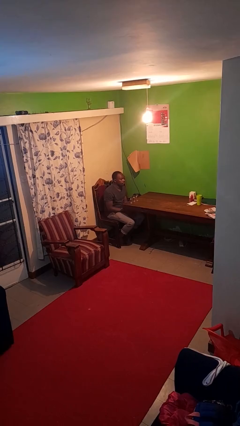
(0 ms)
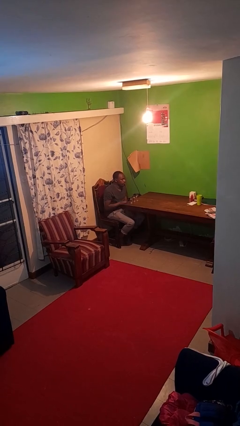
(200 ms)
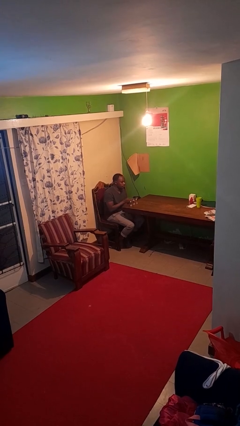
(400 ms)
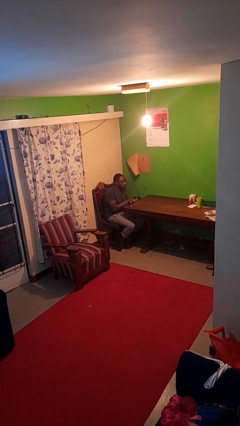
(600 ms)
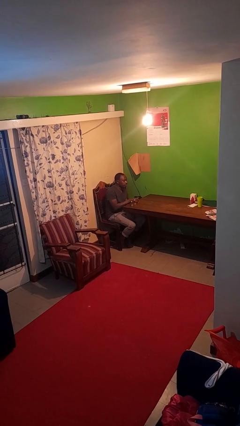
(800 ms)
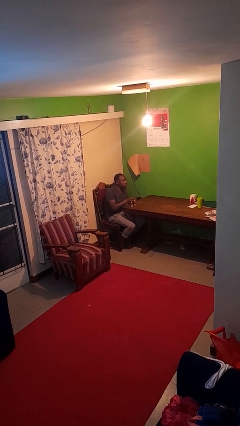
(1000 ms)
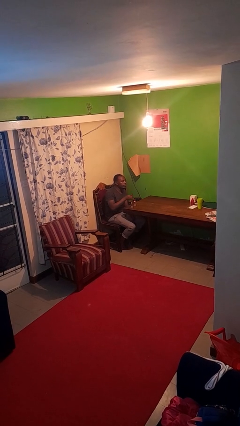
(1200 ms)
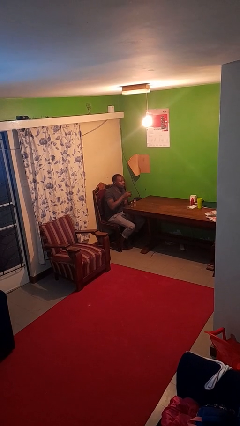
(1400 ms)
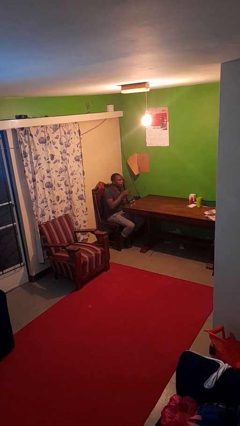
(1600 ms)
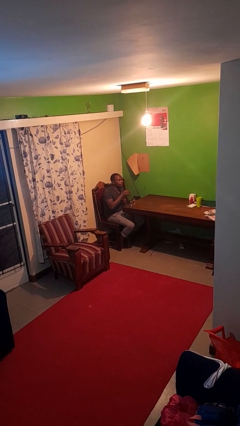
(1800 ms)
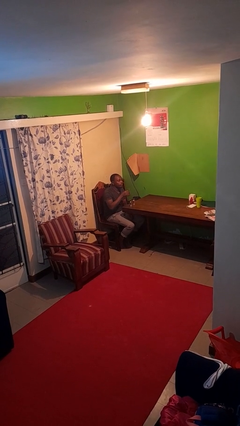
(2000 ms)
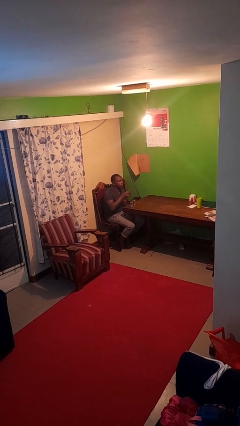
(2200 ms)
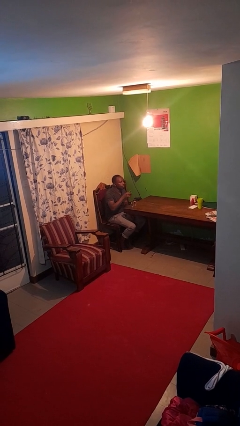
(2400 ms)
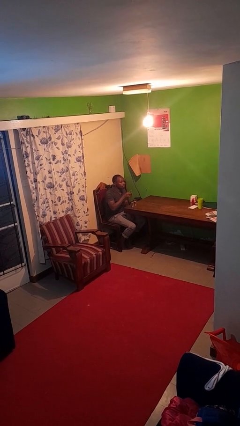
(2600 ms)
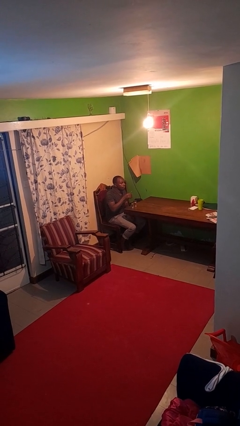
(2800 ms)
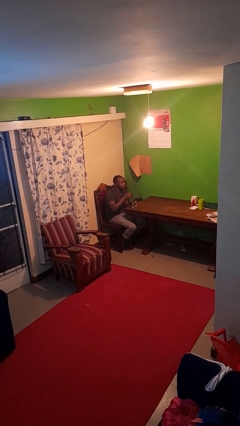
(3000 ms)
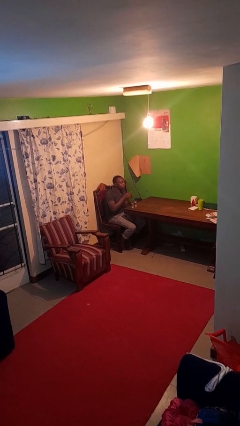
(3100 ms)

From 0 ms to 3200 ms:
person picks up object from table

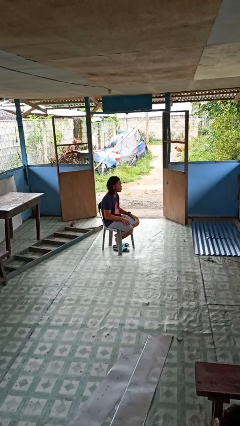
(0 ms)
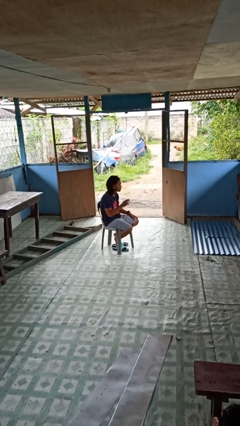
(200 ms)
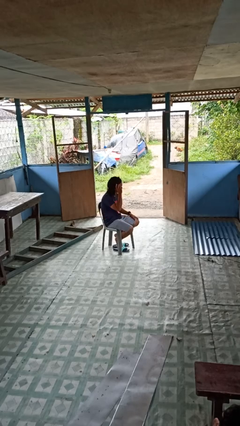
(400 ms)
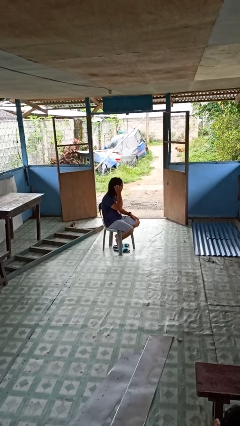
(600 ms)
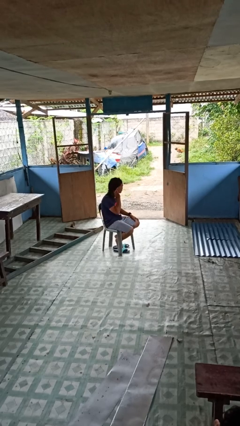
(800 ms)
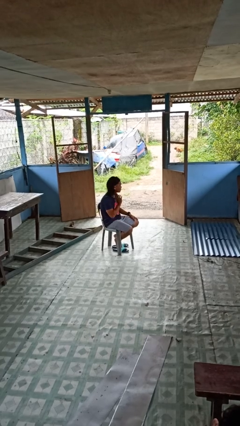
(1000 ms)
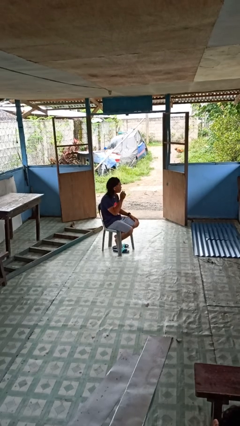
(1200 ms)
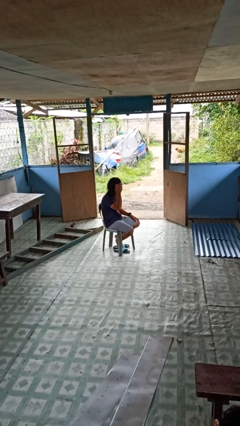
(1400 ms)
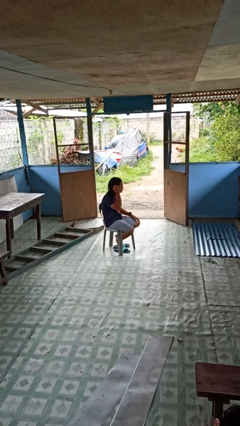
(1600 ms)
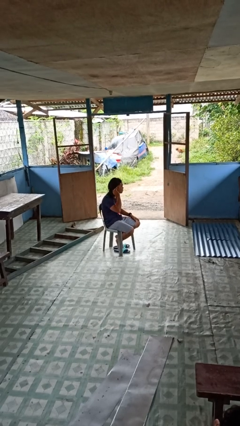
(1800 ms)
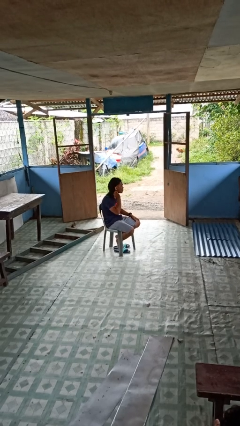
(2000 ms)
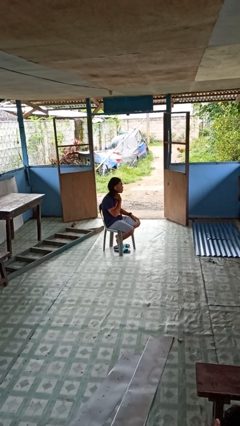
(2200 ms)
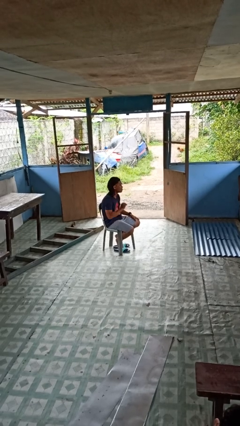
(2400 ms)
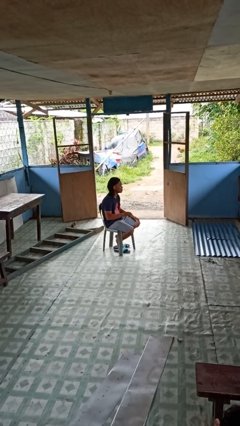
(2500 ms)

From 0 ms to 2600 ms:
person strokes hair

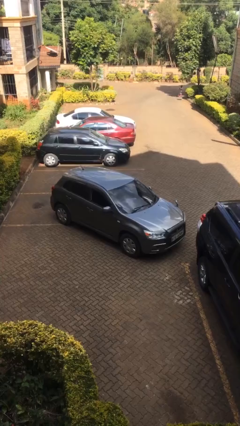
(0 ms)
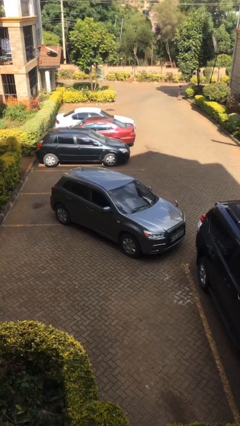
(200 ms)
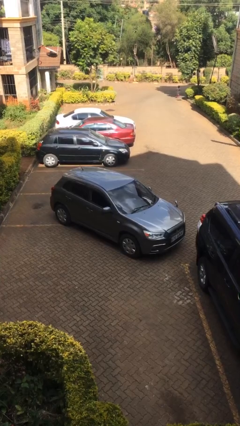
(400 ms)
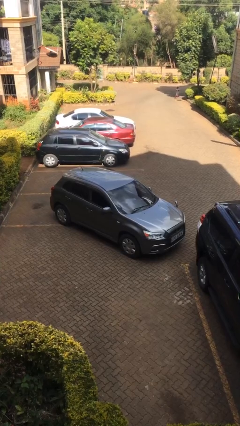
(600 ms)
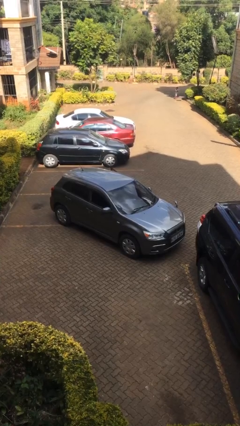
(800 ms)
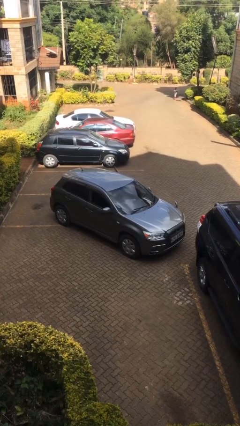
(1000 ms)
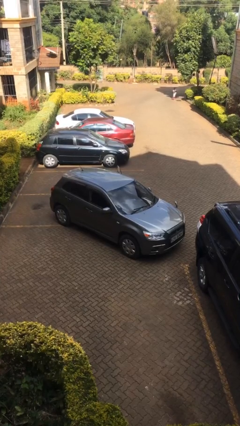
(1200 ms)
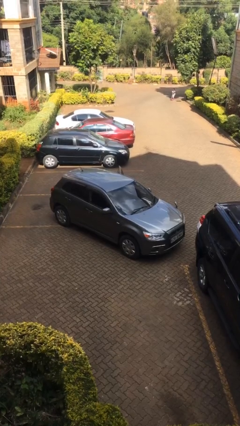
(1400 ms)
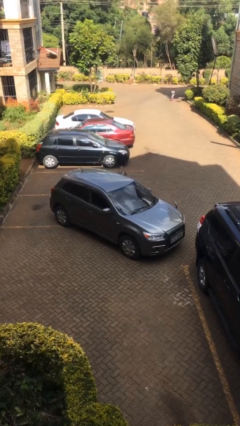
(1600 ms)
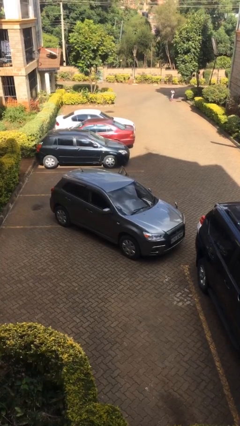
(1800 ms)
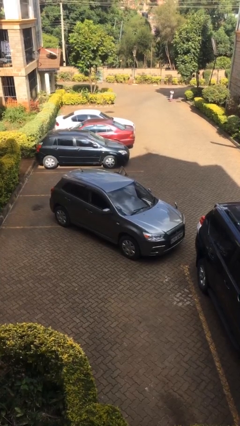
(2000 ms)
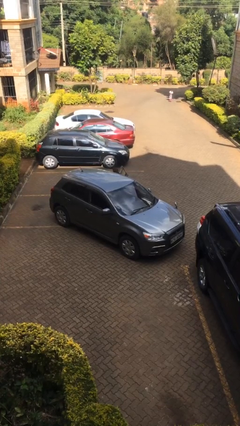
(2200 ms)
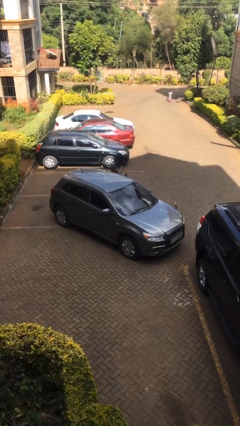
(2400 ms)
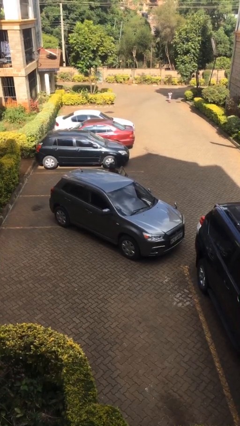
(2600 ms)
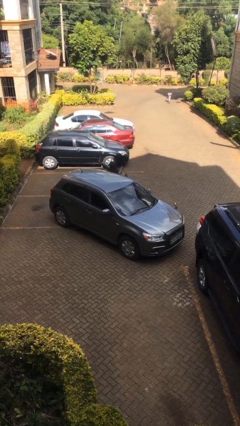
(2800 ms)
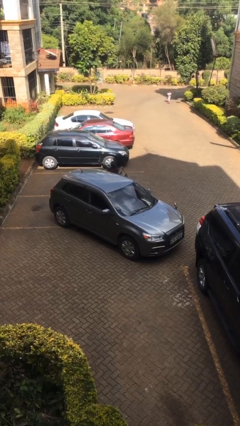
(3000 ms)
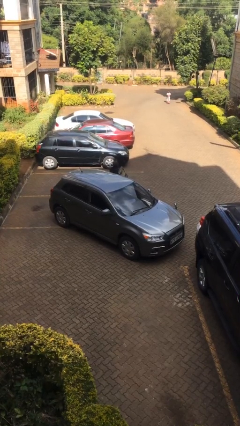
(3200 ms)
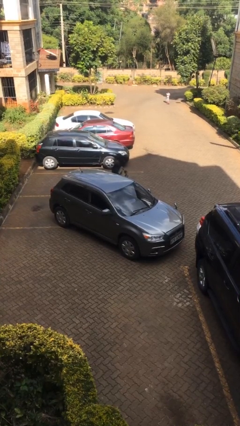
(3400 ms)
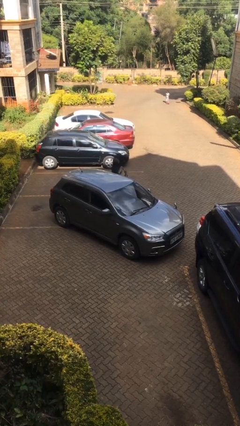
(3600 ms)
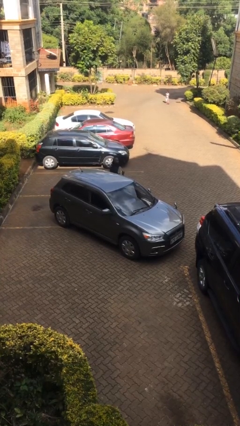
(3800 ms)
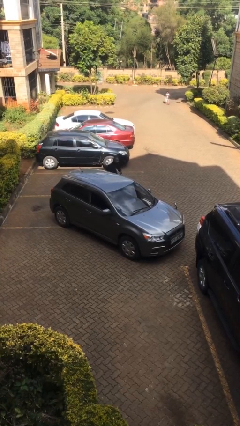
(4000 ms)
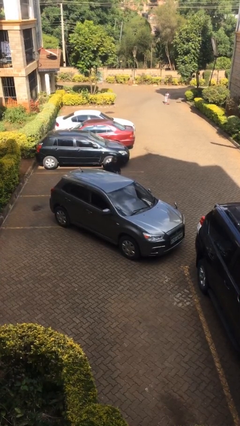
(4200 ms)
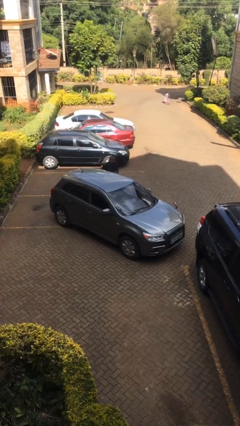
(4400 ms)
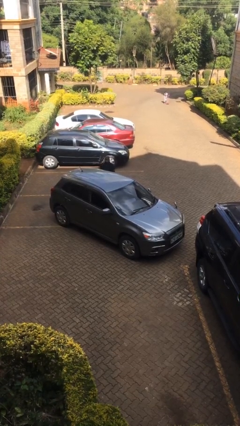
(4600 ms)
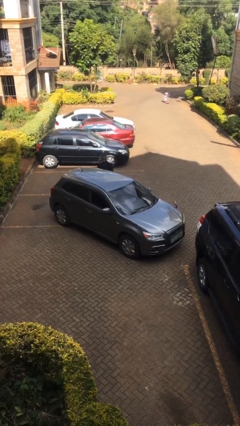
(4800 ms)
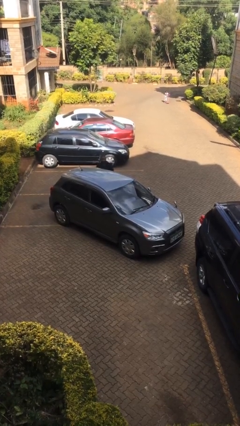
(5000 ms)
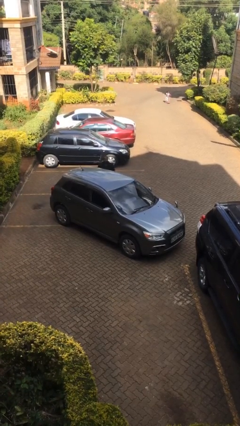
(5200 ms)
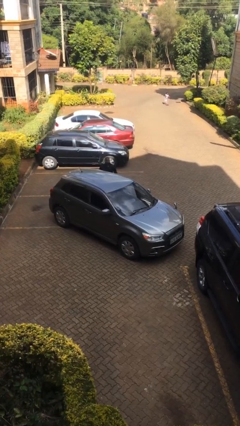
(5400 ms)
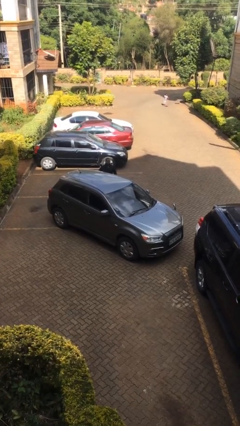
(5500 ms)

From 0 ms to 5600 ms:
car drops off person

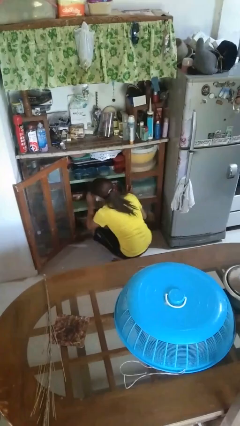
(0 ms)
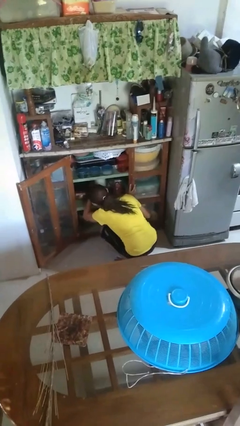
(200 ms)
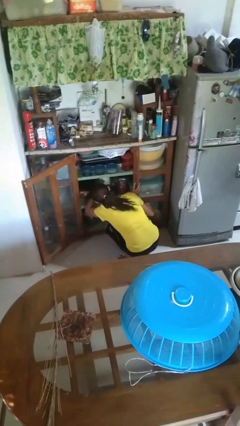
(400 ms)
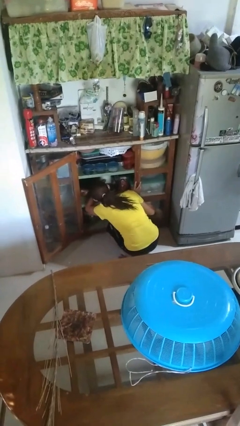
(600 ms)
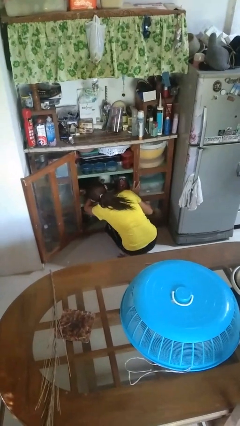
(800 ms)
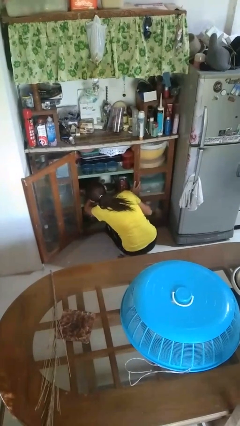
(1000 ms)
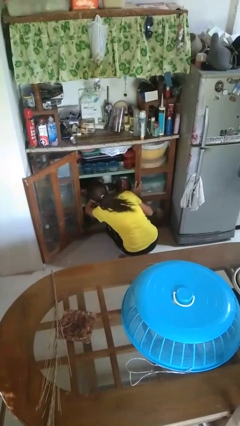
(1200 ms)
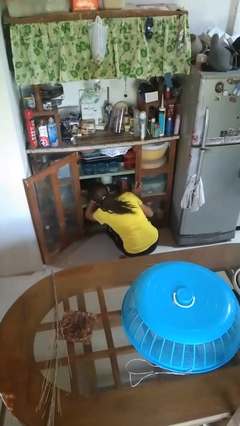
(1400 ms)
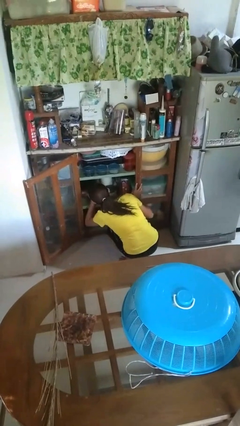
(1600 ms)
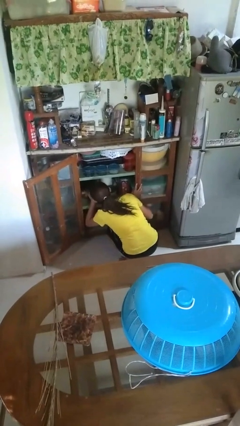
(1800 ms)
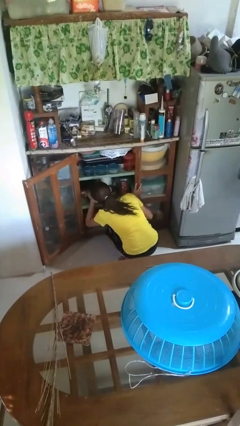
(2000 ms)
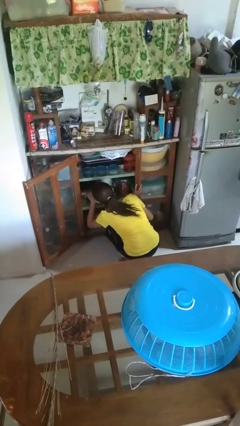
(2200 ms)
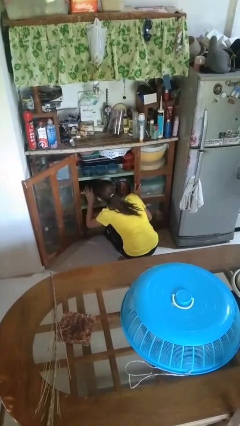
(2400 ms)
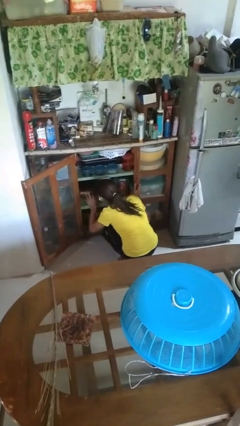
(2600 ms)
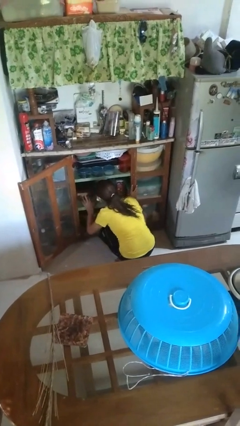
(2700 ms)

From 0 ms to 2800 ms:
person searches in cabinet

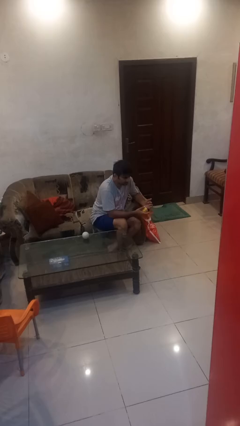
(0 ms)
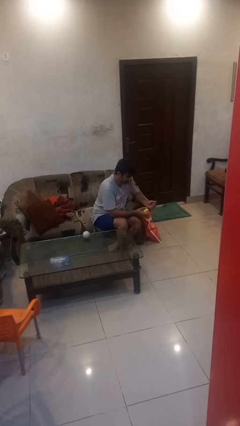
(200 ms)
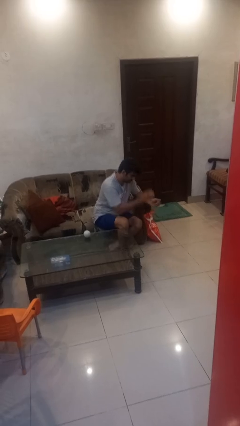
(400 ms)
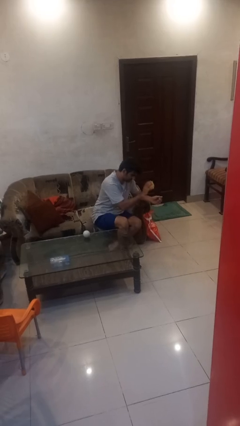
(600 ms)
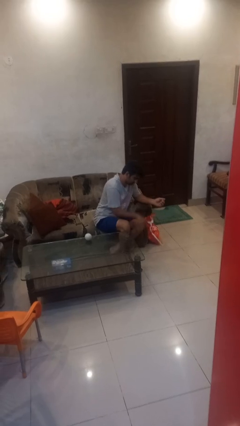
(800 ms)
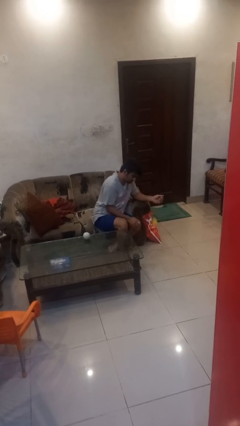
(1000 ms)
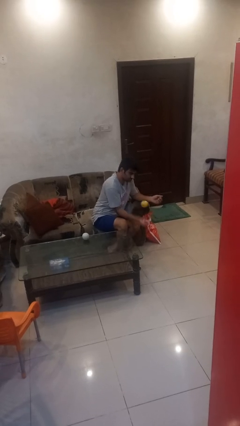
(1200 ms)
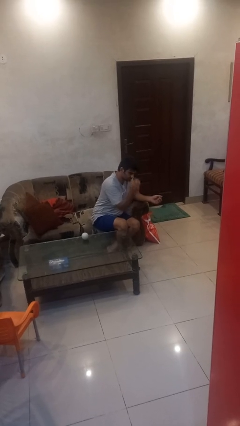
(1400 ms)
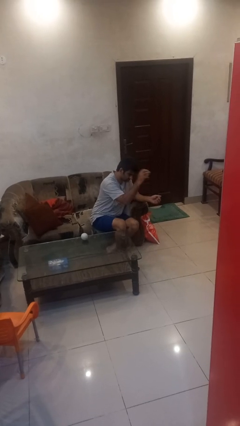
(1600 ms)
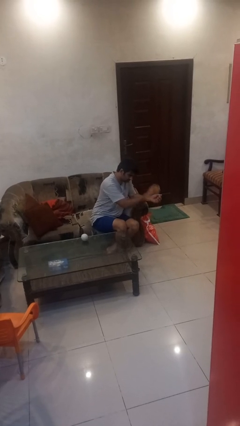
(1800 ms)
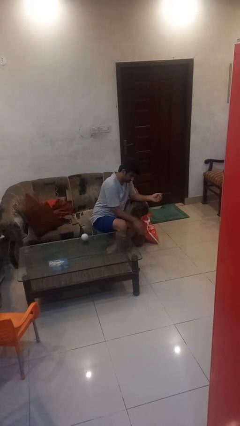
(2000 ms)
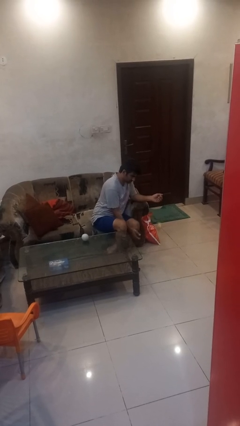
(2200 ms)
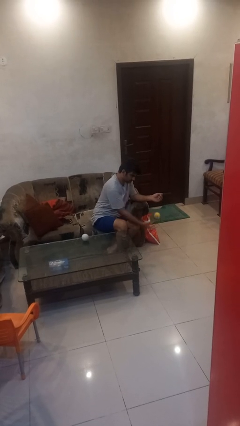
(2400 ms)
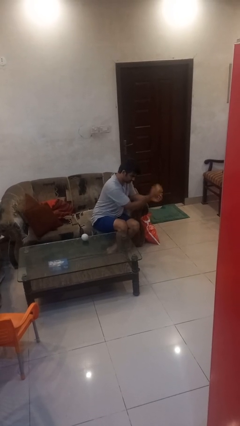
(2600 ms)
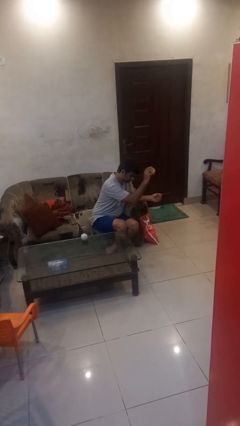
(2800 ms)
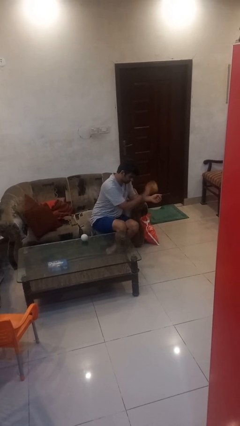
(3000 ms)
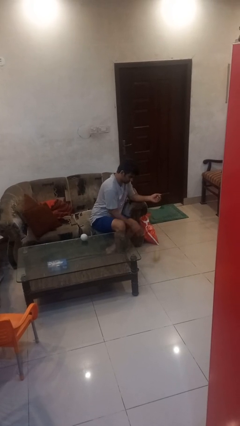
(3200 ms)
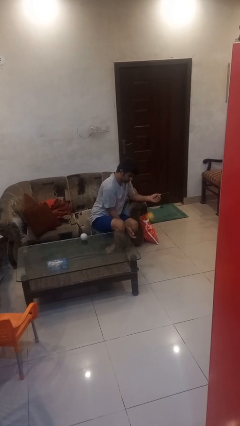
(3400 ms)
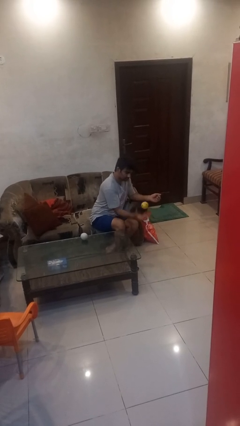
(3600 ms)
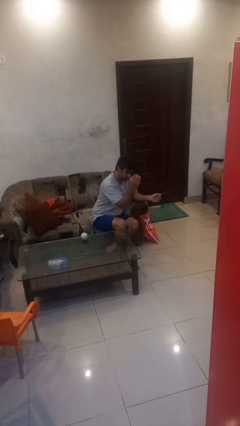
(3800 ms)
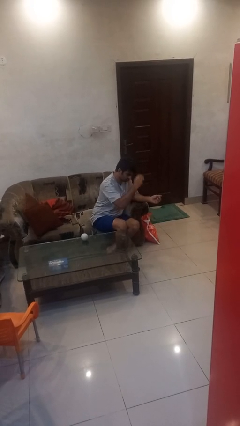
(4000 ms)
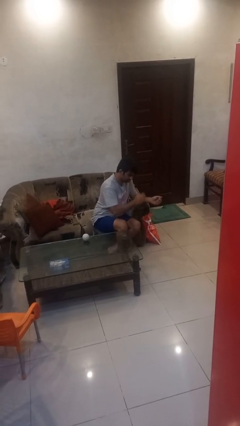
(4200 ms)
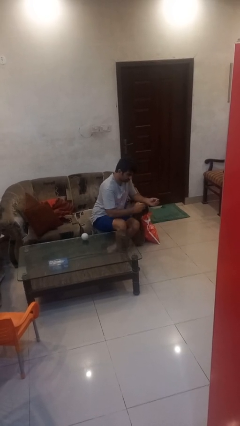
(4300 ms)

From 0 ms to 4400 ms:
person bounces ball on floor
